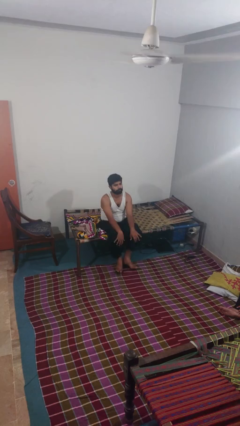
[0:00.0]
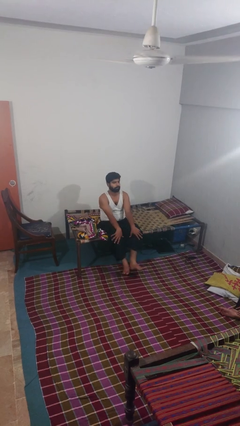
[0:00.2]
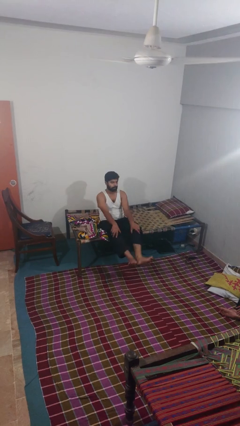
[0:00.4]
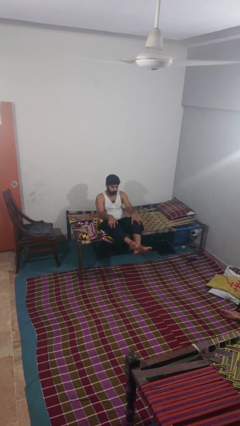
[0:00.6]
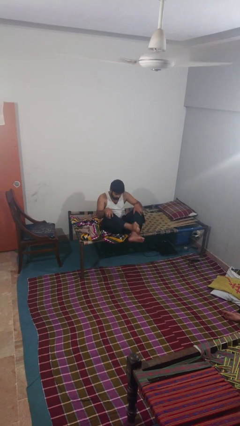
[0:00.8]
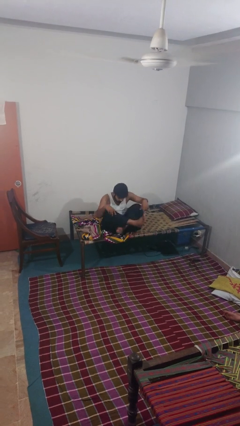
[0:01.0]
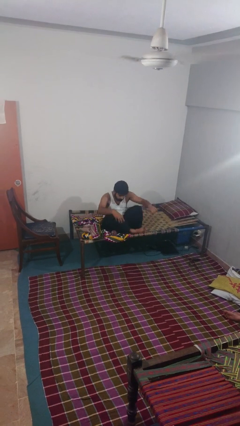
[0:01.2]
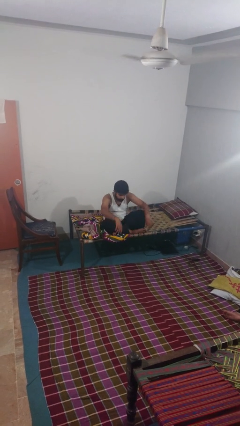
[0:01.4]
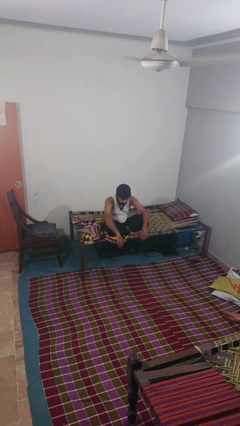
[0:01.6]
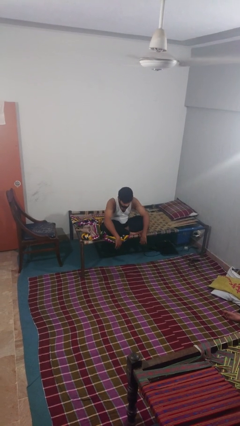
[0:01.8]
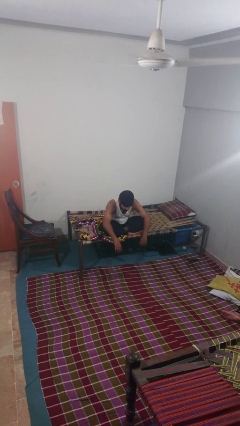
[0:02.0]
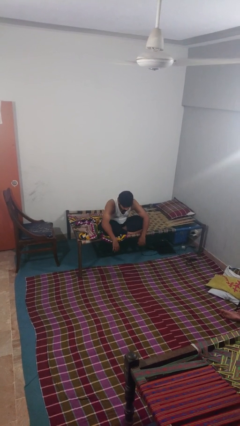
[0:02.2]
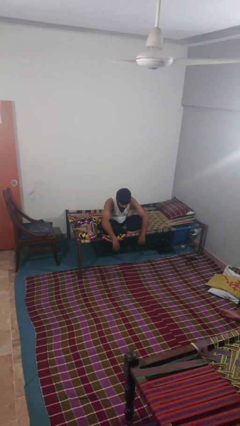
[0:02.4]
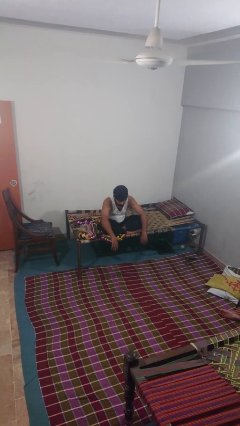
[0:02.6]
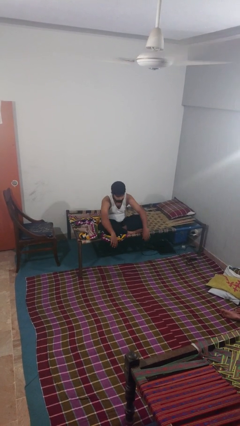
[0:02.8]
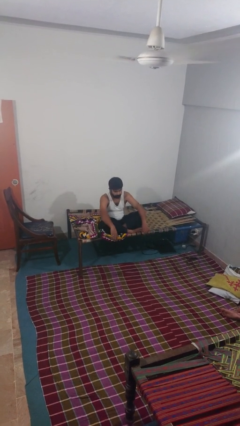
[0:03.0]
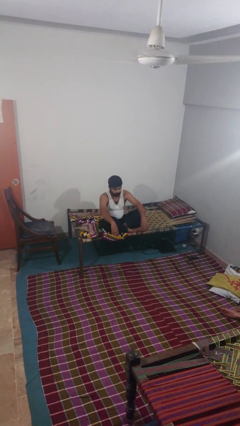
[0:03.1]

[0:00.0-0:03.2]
person crosses legs

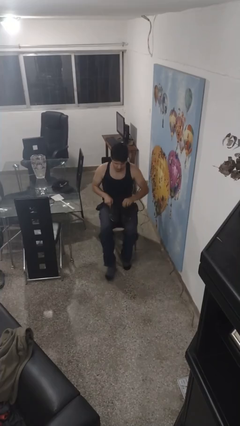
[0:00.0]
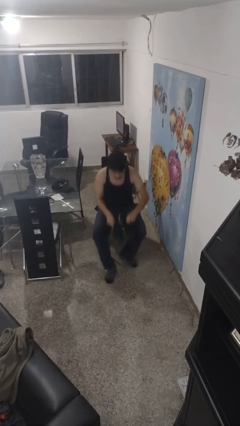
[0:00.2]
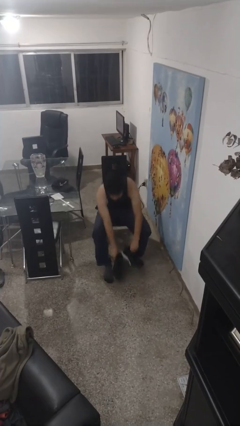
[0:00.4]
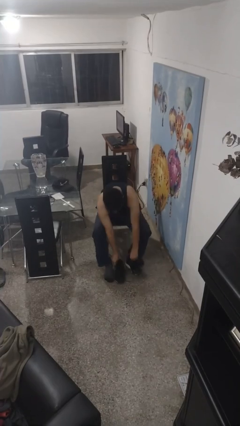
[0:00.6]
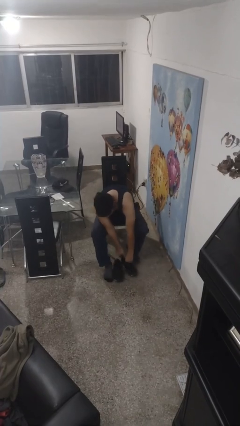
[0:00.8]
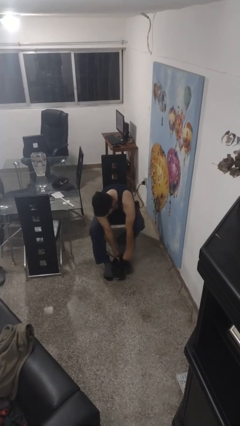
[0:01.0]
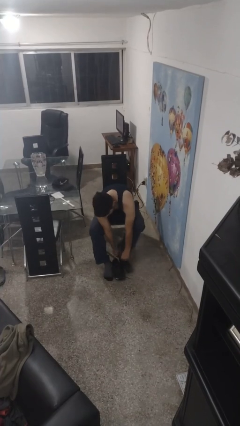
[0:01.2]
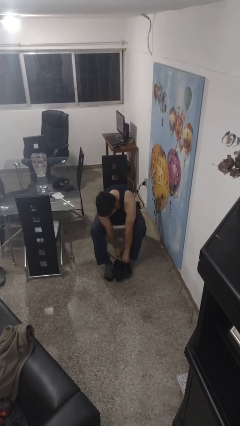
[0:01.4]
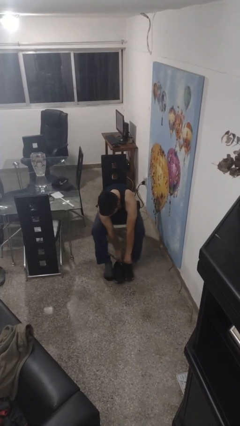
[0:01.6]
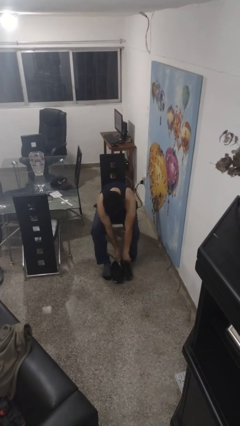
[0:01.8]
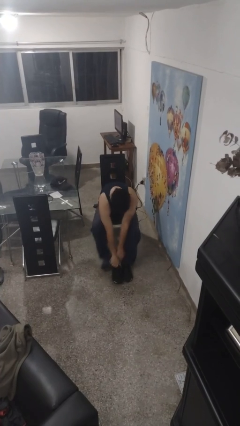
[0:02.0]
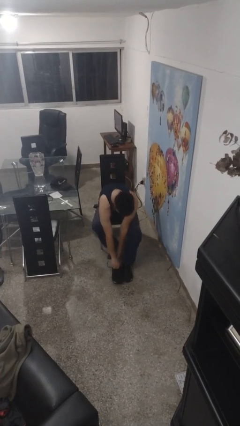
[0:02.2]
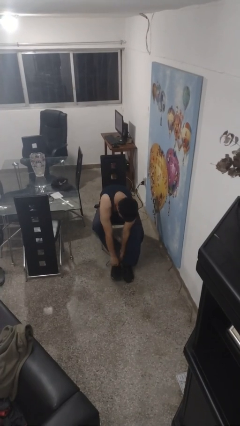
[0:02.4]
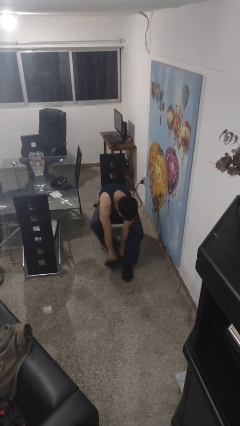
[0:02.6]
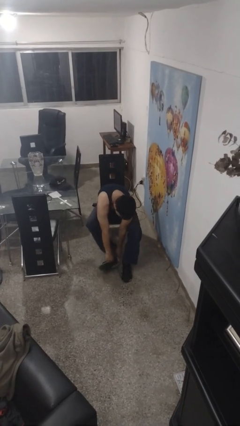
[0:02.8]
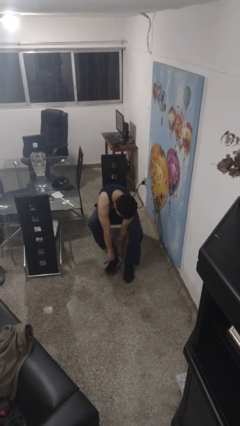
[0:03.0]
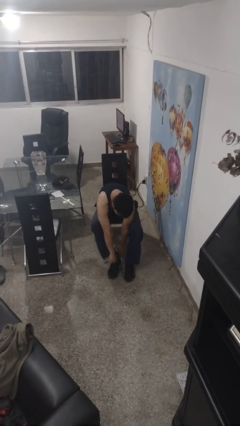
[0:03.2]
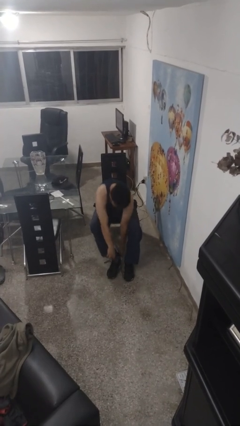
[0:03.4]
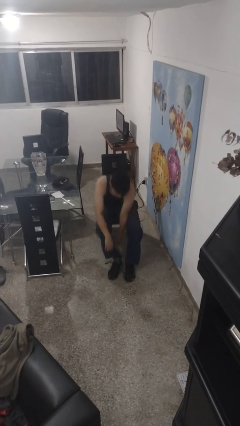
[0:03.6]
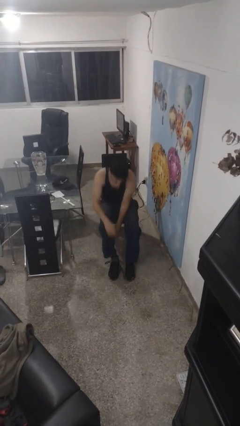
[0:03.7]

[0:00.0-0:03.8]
person puts on shoes

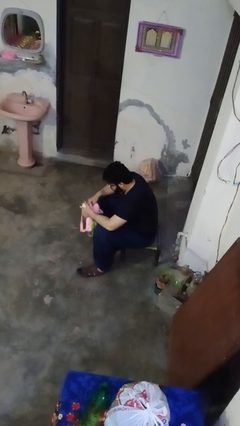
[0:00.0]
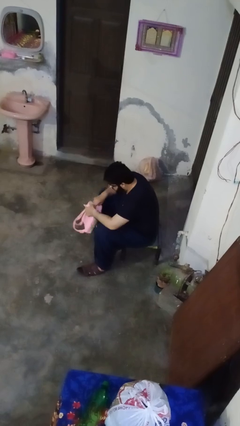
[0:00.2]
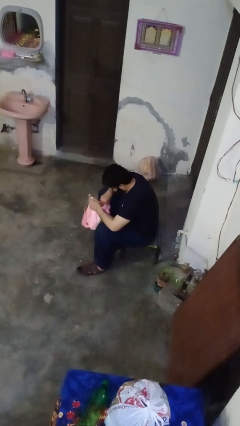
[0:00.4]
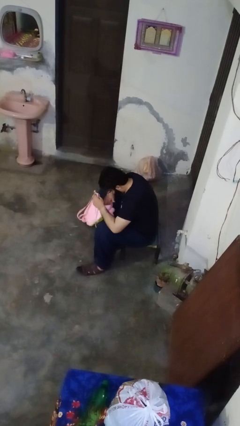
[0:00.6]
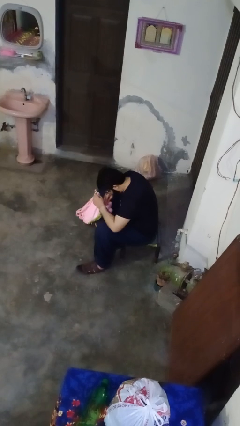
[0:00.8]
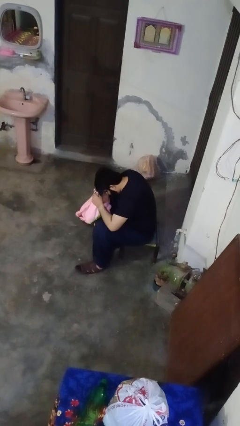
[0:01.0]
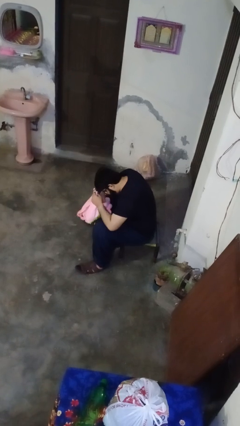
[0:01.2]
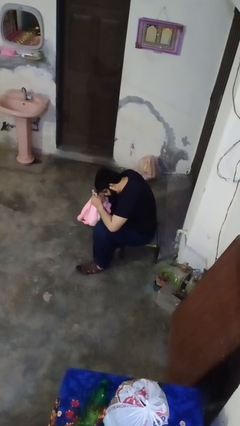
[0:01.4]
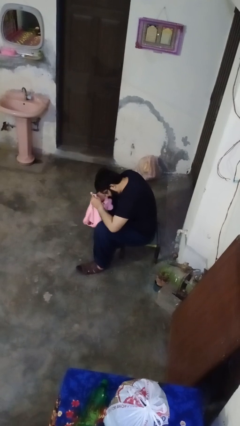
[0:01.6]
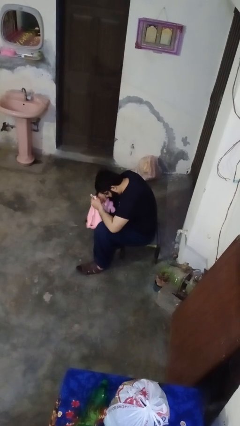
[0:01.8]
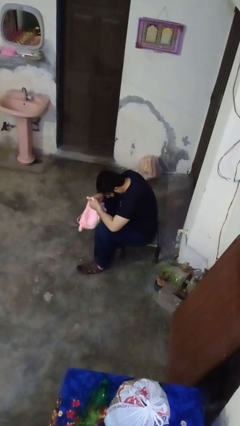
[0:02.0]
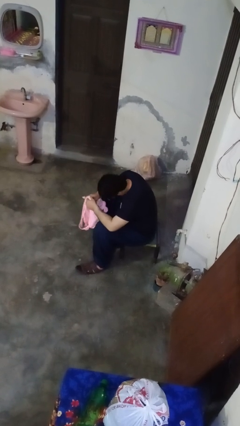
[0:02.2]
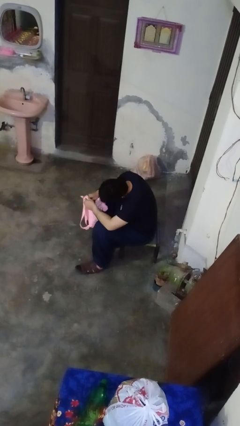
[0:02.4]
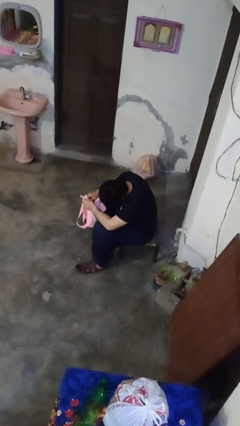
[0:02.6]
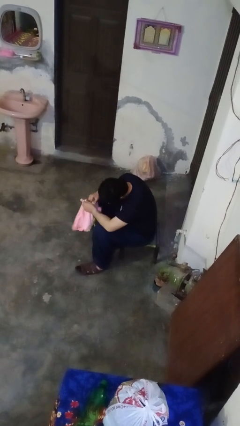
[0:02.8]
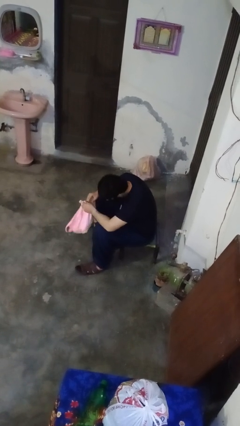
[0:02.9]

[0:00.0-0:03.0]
person searches in bag

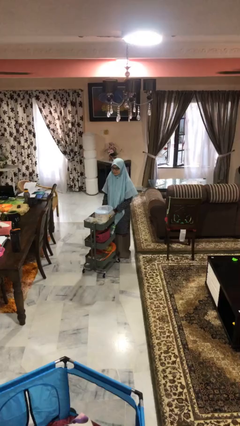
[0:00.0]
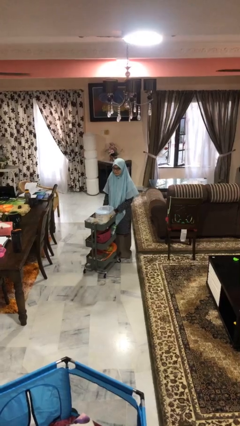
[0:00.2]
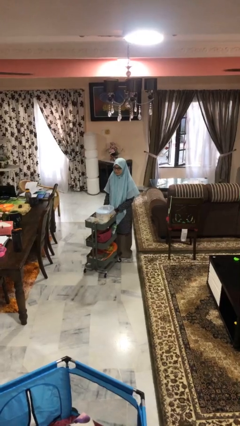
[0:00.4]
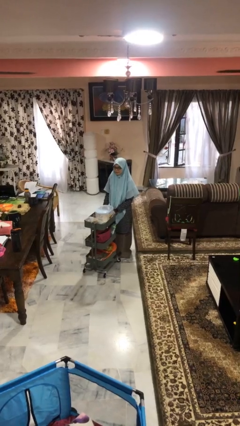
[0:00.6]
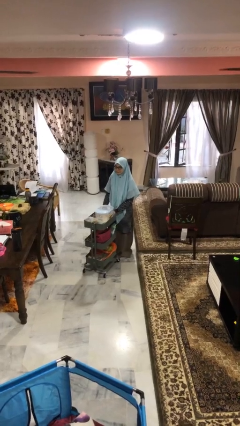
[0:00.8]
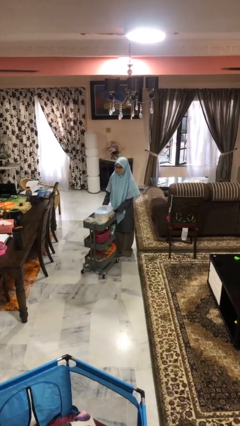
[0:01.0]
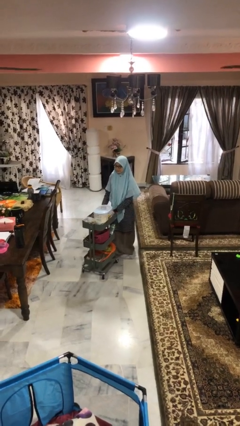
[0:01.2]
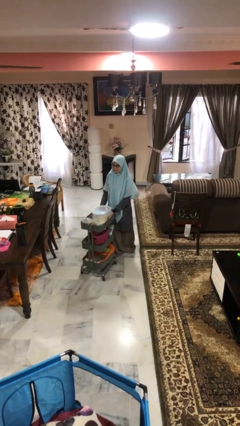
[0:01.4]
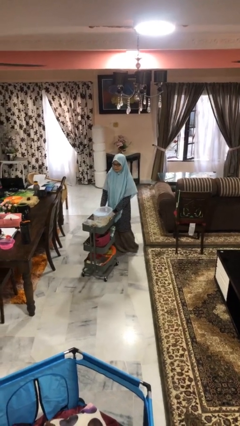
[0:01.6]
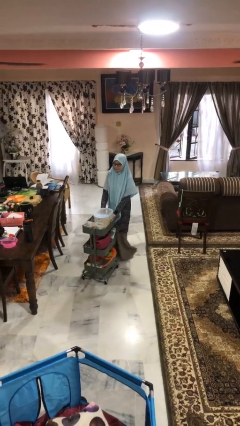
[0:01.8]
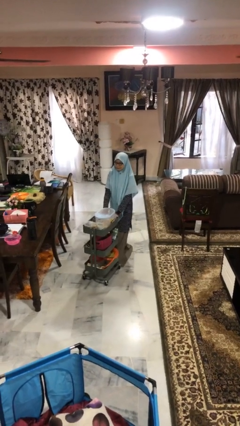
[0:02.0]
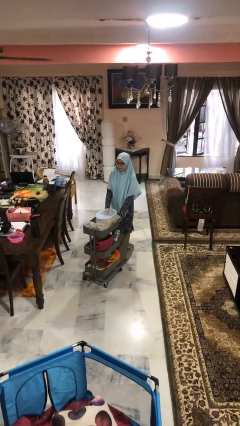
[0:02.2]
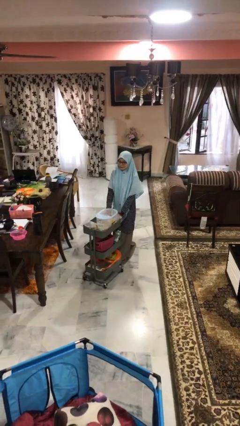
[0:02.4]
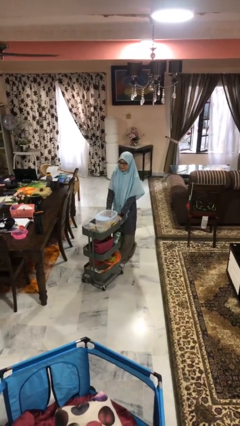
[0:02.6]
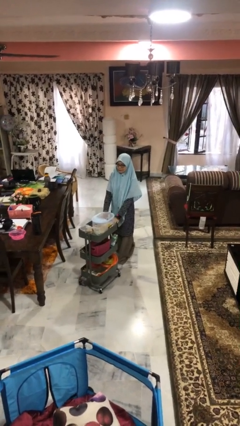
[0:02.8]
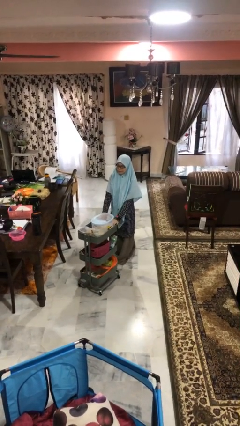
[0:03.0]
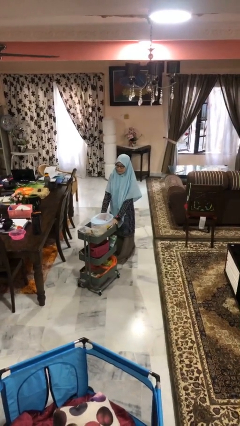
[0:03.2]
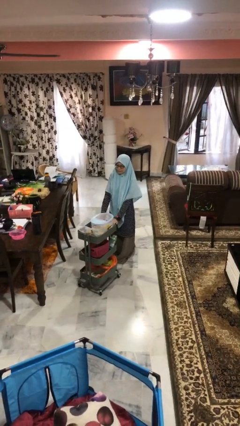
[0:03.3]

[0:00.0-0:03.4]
person pushes wheeled cart

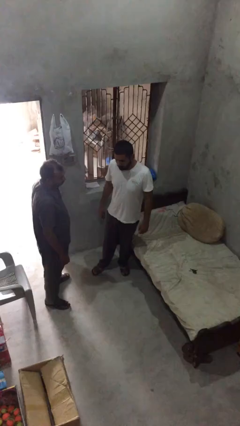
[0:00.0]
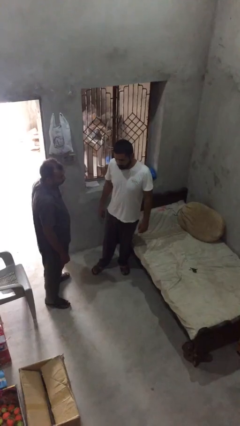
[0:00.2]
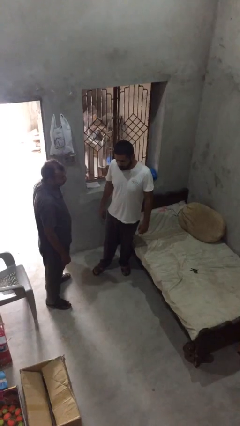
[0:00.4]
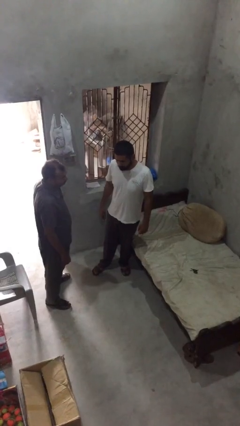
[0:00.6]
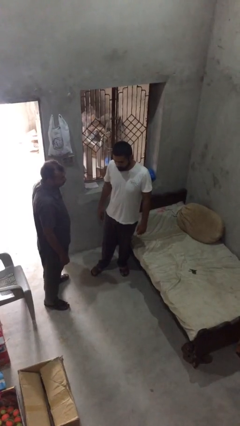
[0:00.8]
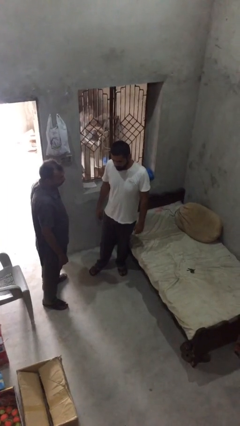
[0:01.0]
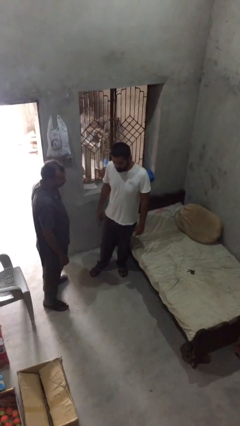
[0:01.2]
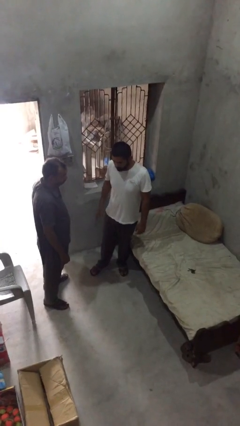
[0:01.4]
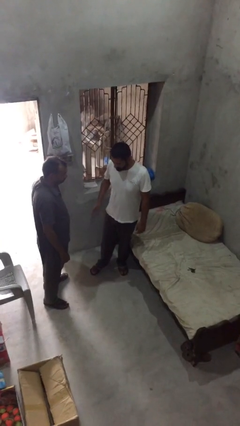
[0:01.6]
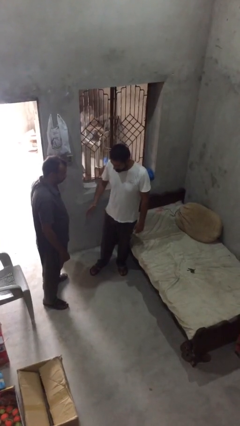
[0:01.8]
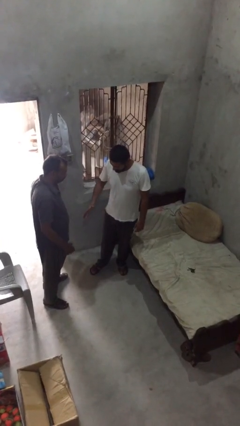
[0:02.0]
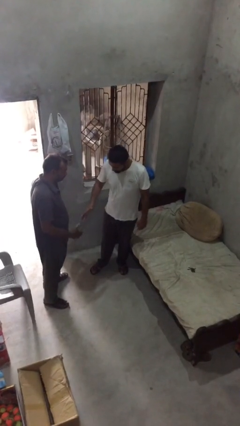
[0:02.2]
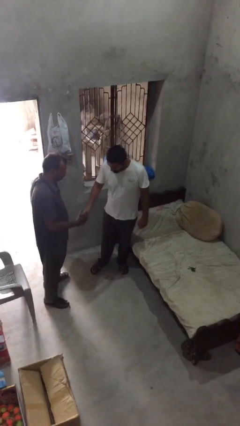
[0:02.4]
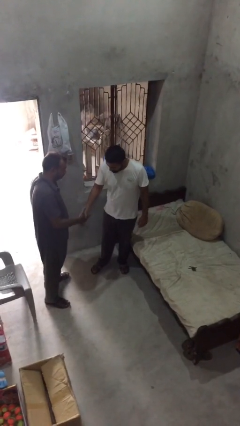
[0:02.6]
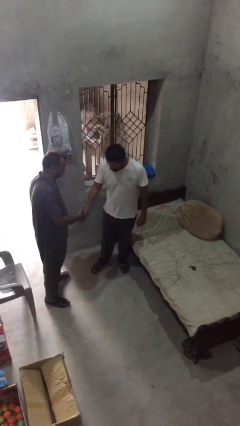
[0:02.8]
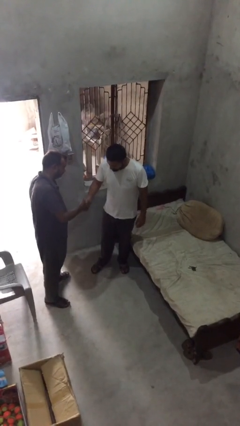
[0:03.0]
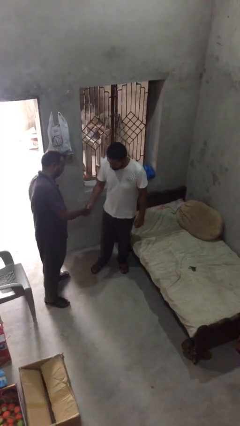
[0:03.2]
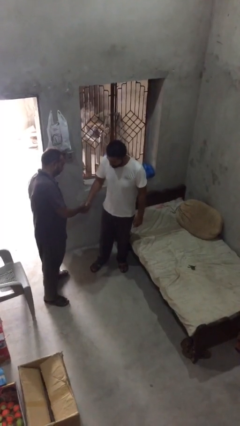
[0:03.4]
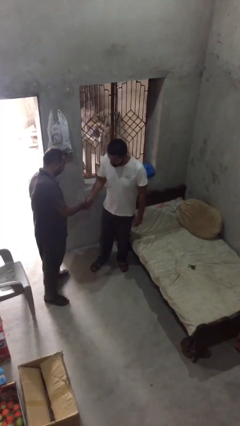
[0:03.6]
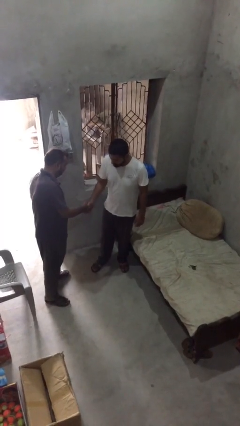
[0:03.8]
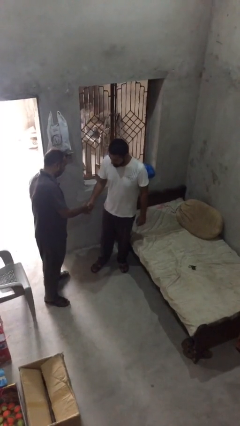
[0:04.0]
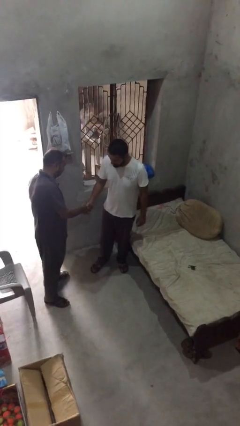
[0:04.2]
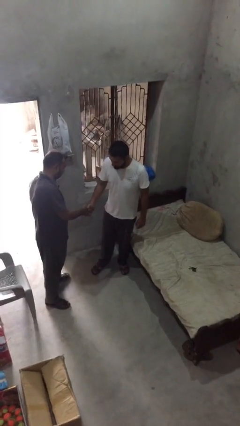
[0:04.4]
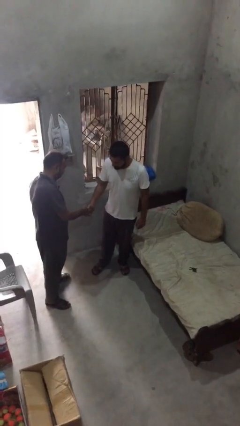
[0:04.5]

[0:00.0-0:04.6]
person shakes hand
